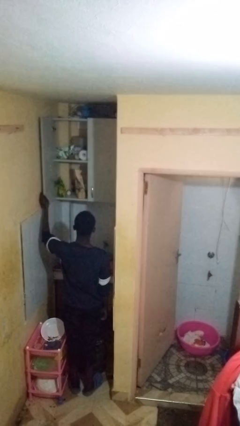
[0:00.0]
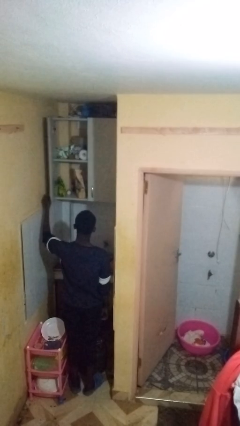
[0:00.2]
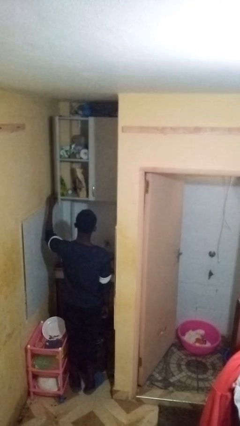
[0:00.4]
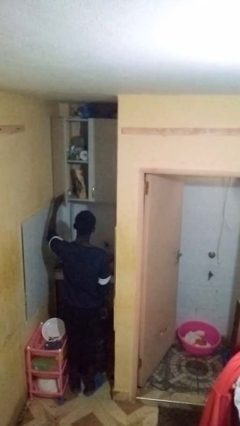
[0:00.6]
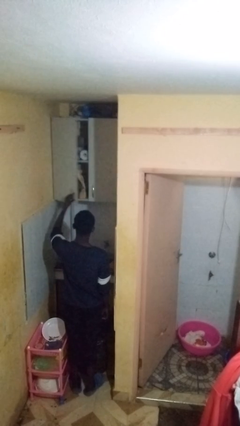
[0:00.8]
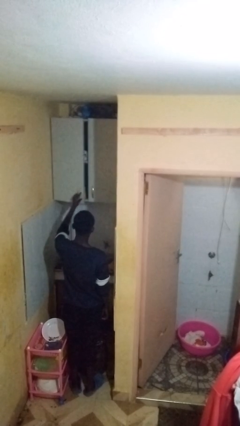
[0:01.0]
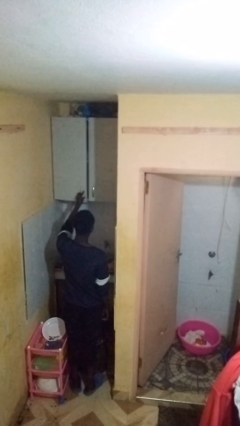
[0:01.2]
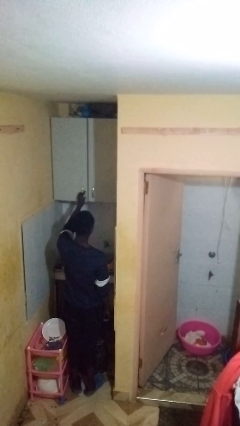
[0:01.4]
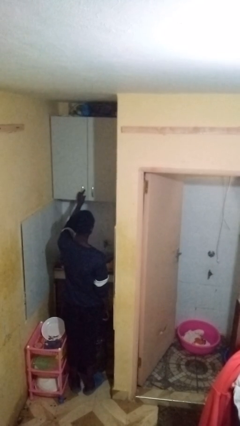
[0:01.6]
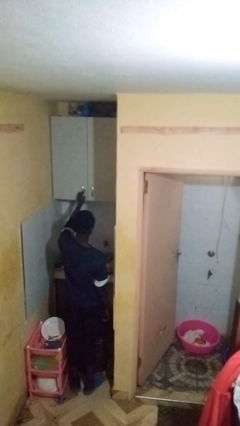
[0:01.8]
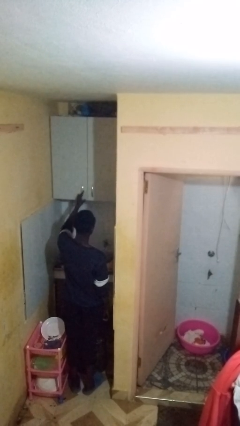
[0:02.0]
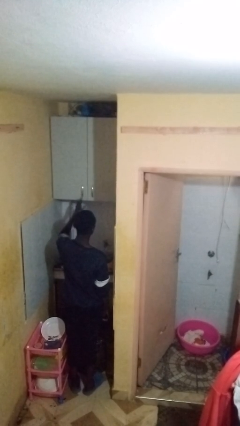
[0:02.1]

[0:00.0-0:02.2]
person closes cabinet

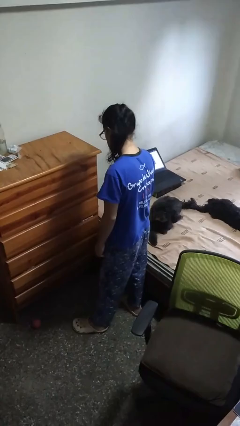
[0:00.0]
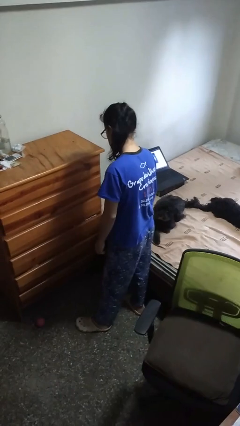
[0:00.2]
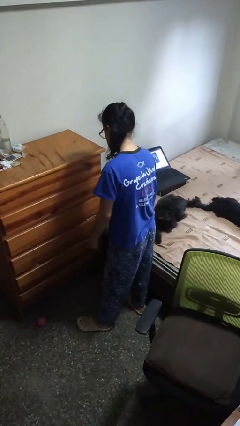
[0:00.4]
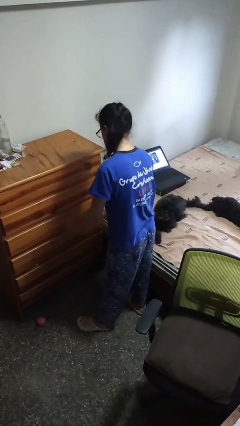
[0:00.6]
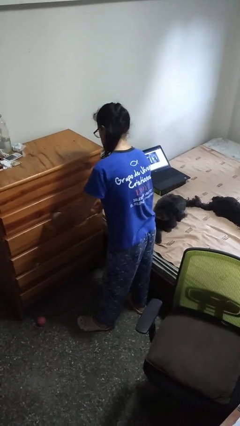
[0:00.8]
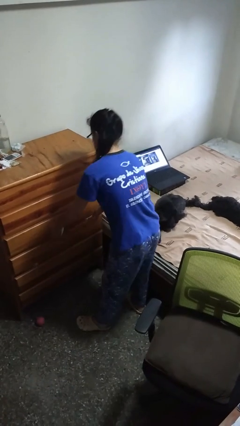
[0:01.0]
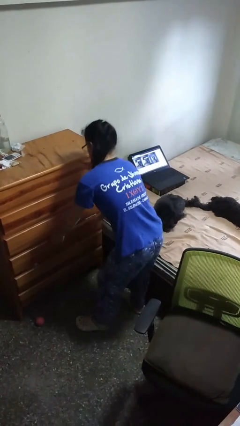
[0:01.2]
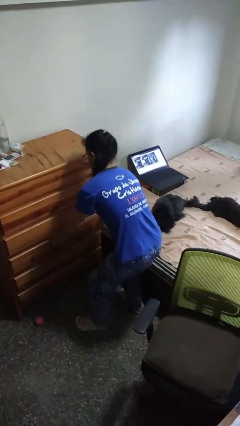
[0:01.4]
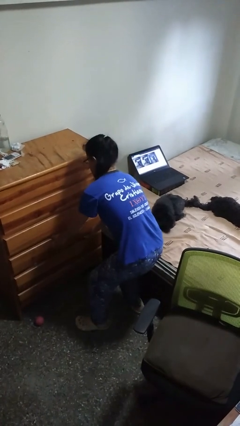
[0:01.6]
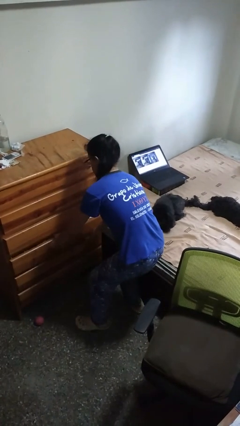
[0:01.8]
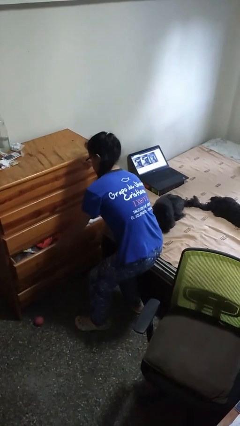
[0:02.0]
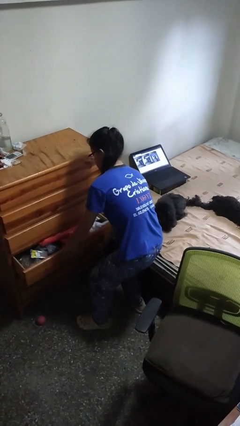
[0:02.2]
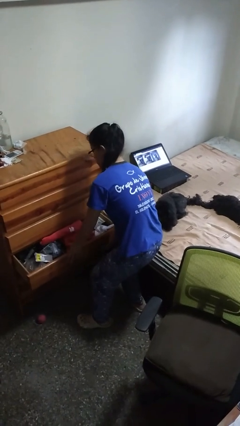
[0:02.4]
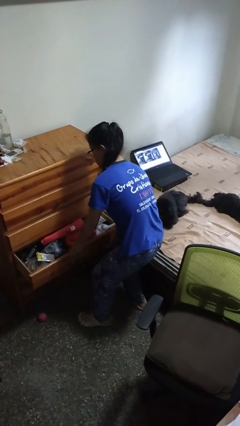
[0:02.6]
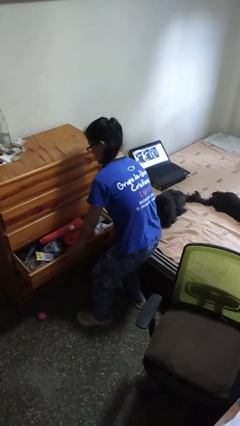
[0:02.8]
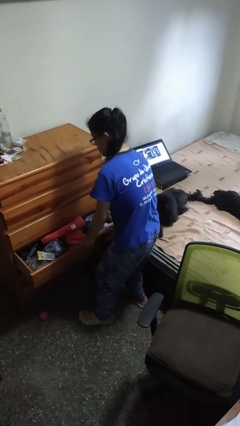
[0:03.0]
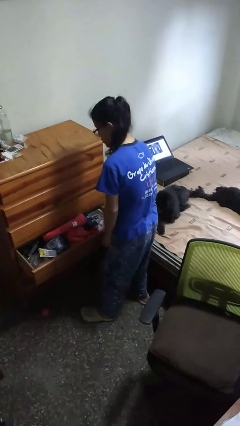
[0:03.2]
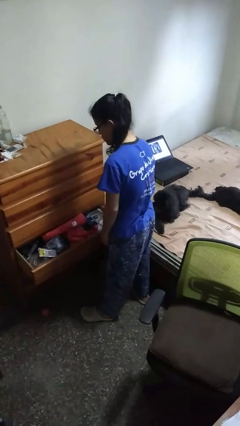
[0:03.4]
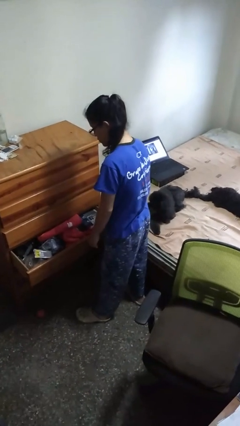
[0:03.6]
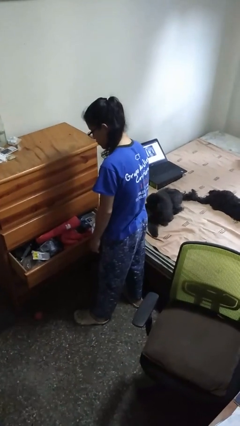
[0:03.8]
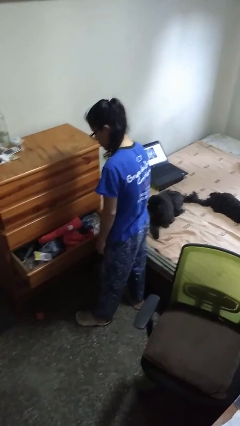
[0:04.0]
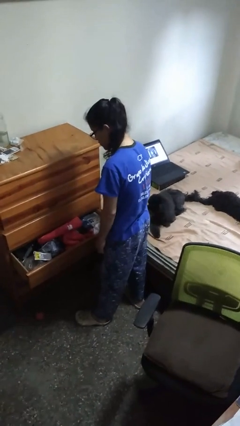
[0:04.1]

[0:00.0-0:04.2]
person opens dresser drawer

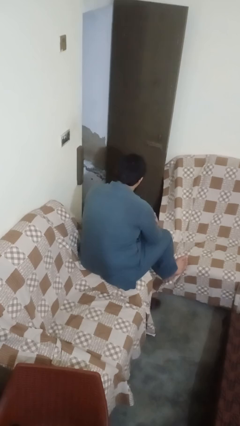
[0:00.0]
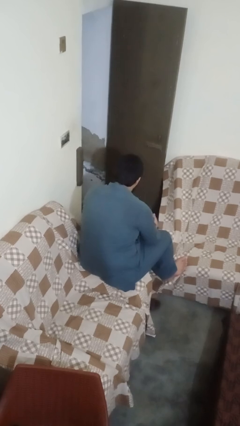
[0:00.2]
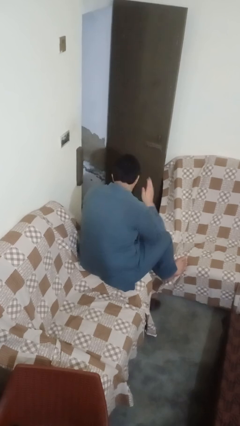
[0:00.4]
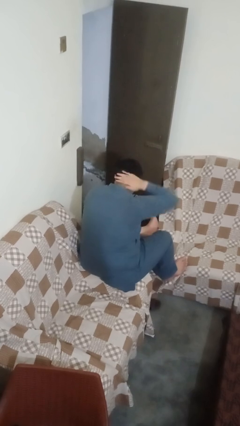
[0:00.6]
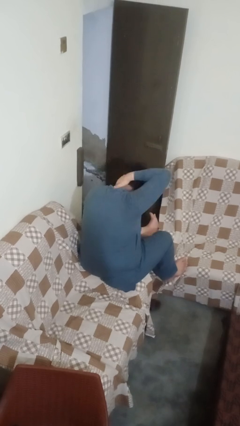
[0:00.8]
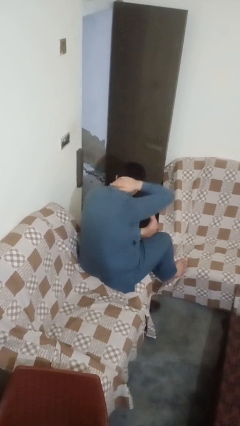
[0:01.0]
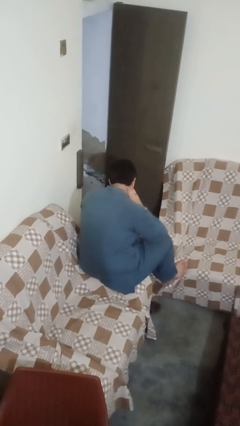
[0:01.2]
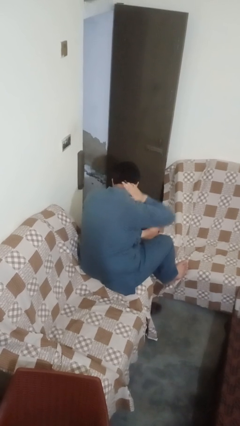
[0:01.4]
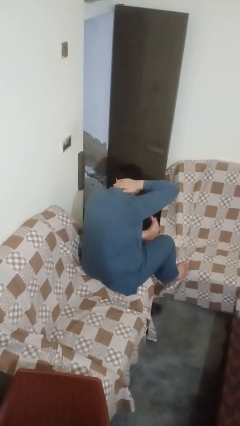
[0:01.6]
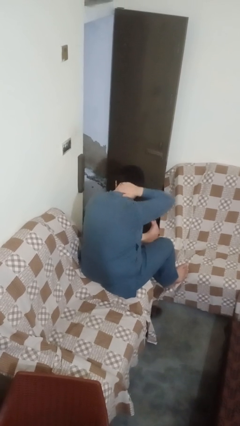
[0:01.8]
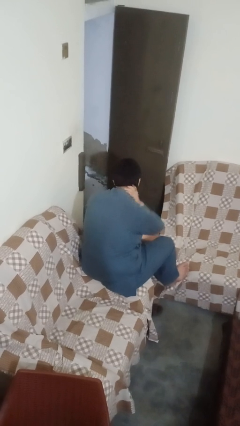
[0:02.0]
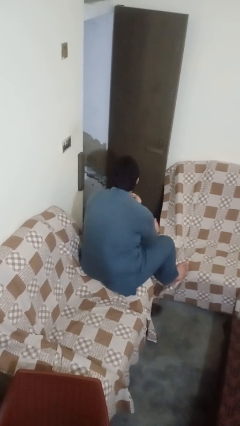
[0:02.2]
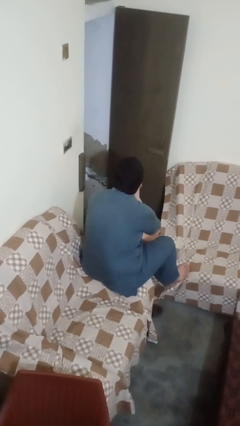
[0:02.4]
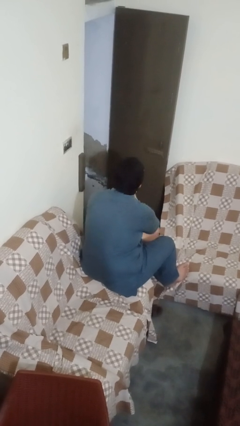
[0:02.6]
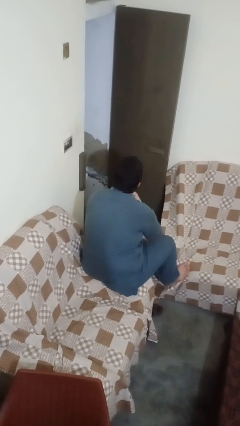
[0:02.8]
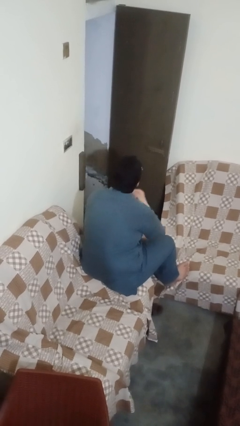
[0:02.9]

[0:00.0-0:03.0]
person rubs neck

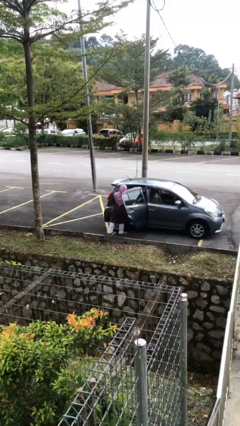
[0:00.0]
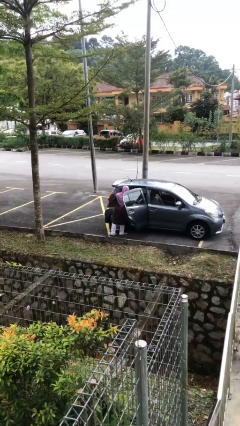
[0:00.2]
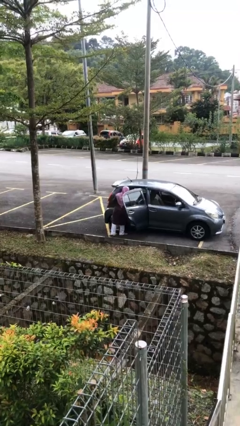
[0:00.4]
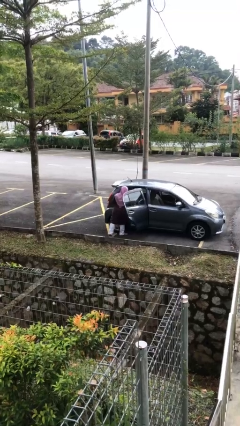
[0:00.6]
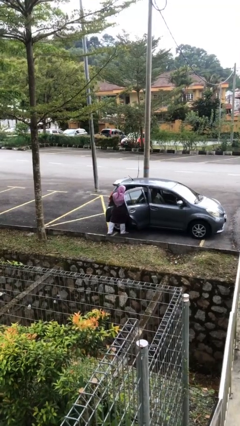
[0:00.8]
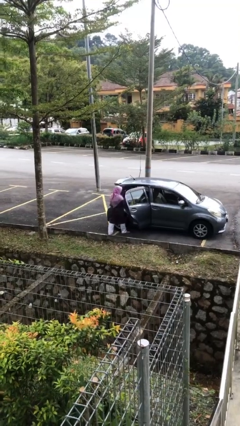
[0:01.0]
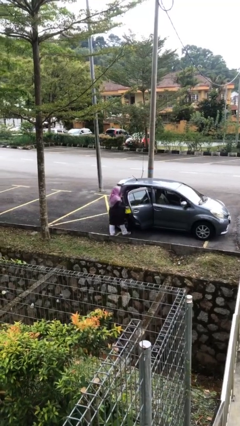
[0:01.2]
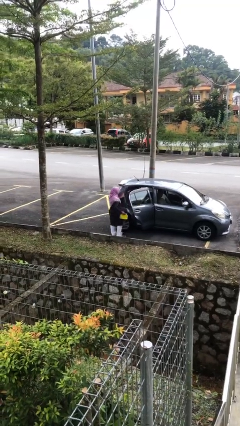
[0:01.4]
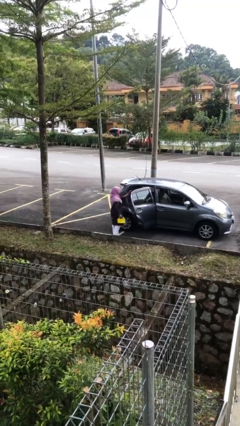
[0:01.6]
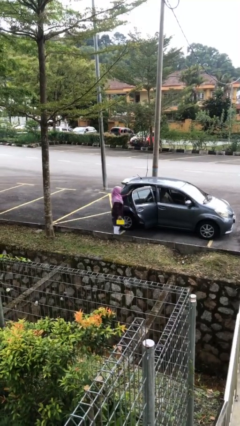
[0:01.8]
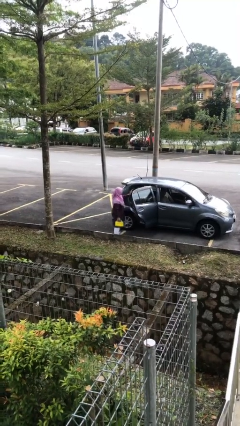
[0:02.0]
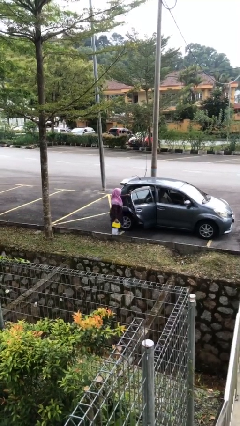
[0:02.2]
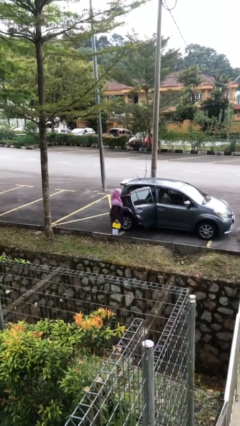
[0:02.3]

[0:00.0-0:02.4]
person unloads car

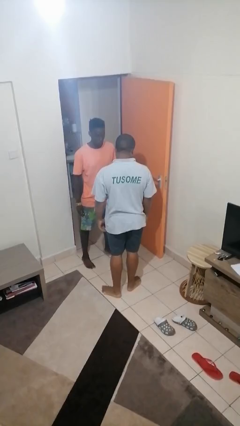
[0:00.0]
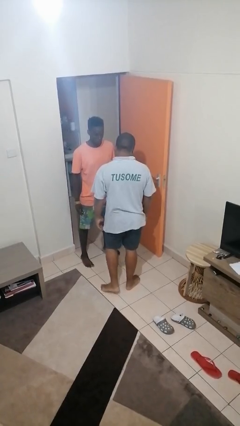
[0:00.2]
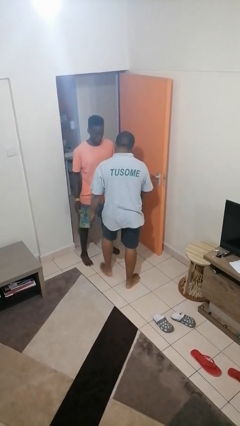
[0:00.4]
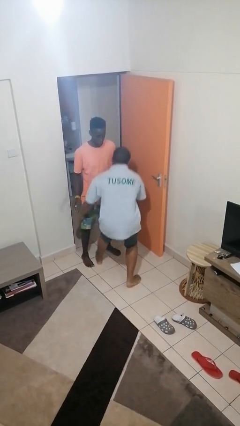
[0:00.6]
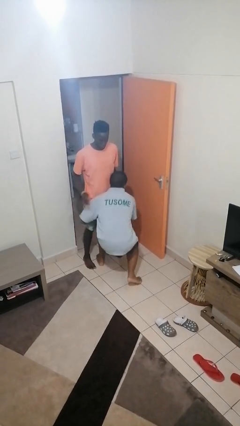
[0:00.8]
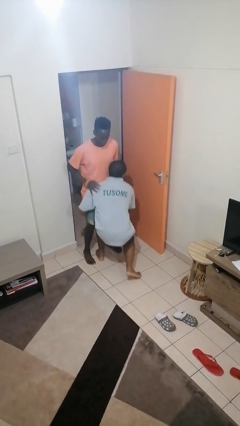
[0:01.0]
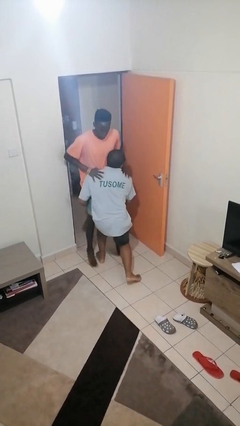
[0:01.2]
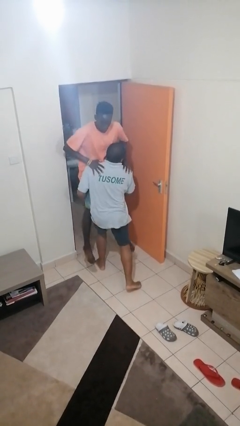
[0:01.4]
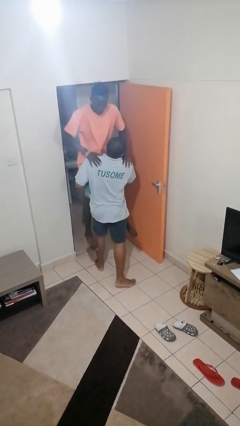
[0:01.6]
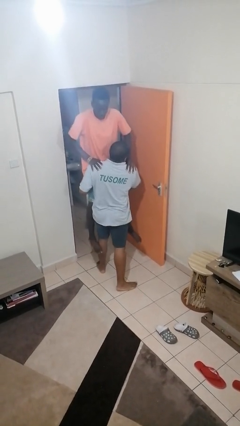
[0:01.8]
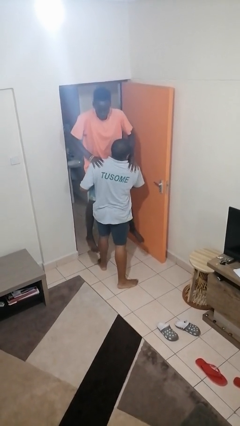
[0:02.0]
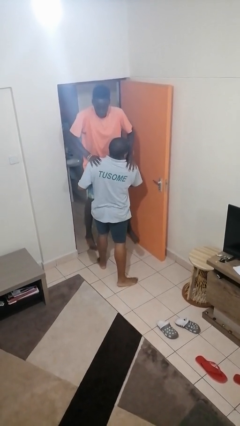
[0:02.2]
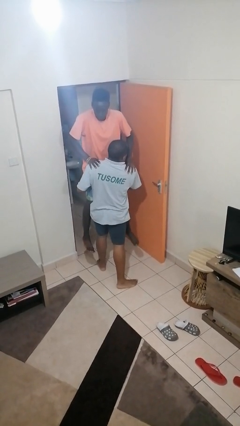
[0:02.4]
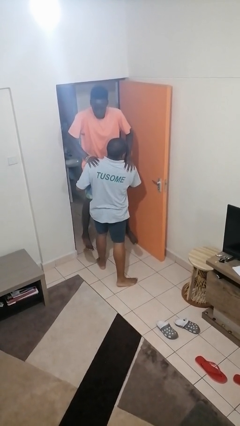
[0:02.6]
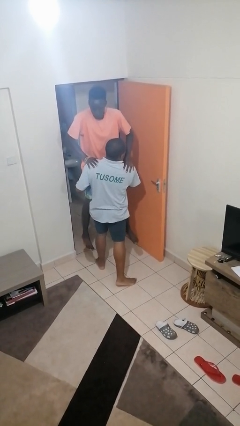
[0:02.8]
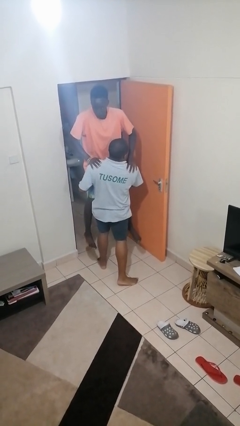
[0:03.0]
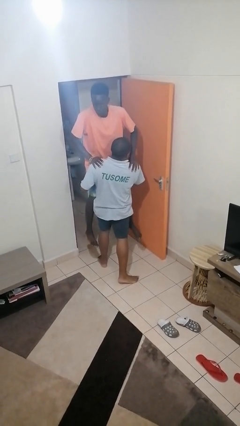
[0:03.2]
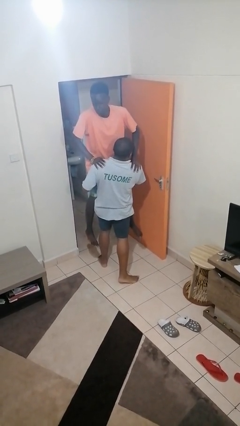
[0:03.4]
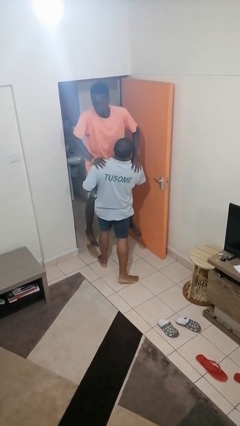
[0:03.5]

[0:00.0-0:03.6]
person picks up person

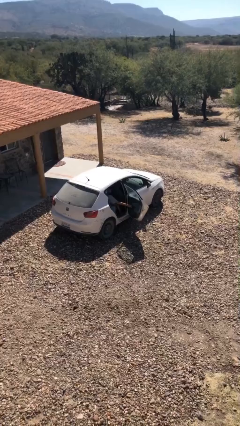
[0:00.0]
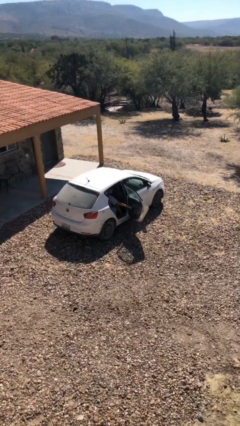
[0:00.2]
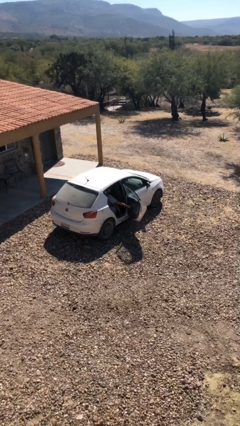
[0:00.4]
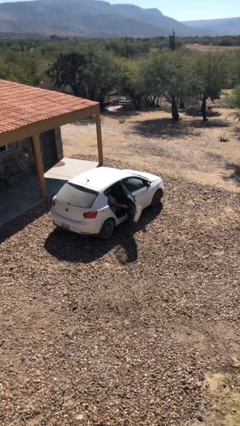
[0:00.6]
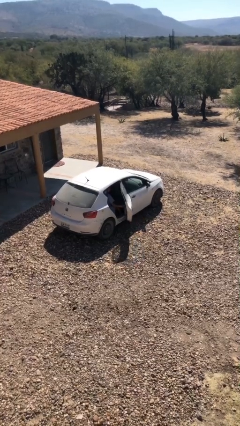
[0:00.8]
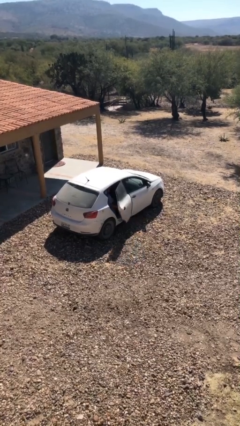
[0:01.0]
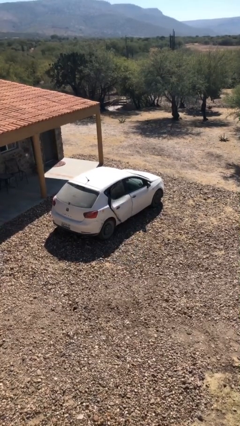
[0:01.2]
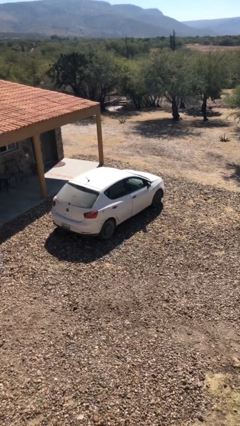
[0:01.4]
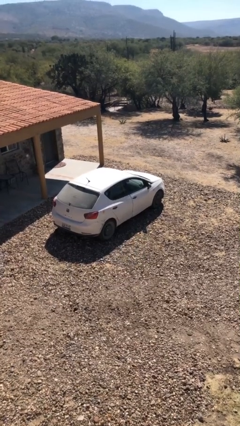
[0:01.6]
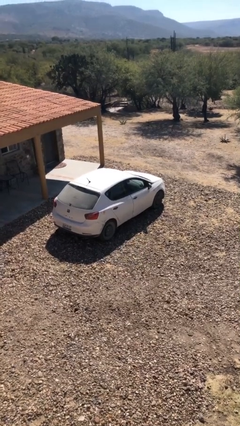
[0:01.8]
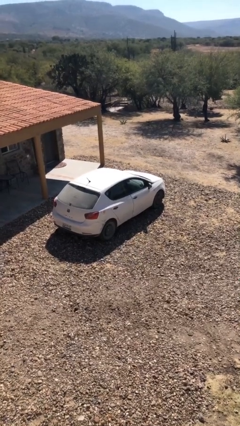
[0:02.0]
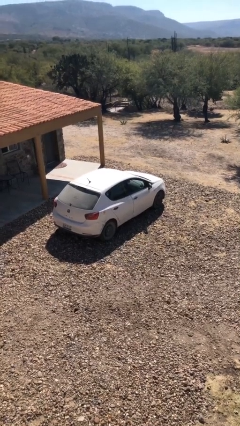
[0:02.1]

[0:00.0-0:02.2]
person closes car door

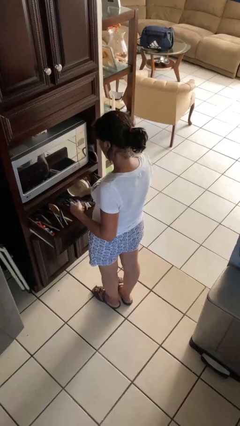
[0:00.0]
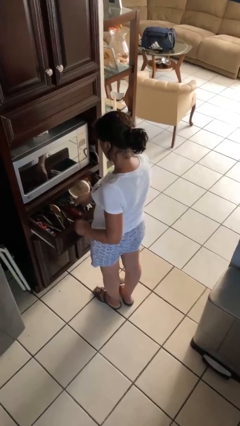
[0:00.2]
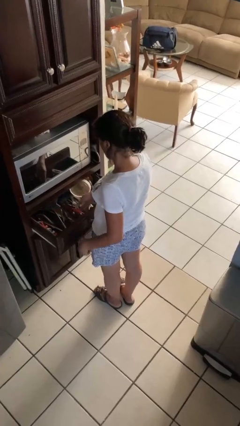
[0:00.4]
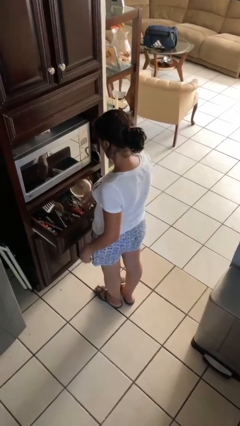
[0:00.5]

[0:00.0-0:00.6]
person puts object into kitchen drawer
